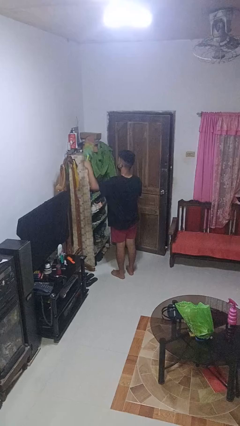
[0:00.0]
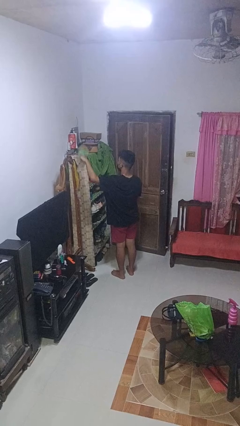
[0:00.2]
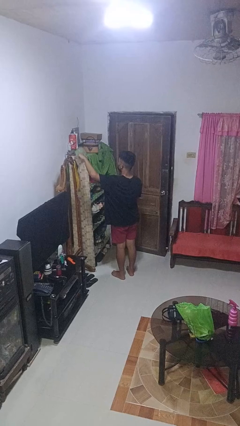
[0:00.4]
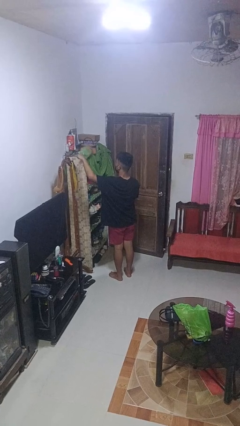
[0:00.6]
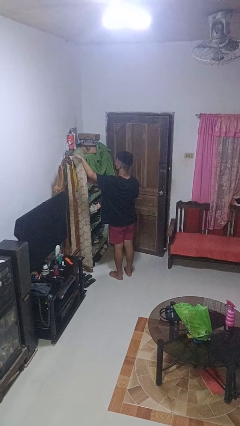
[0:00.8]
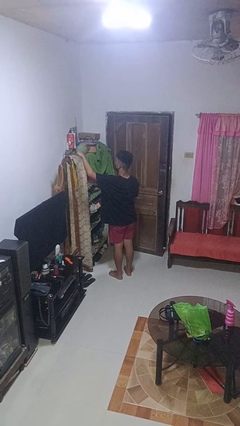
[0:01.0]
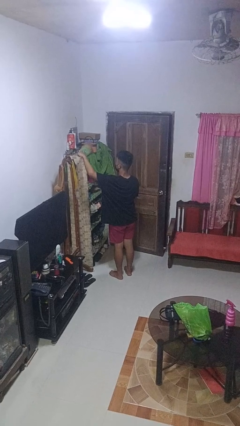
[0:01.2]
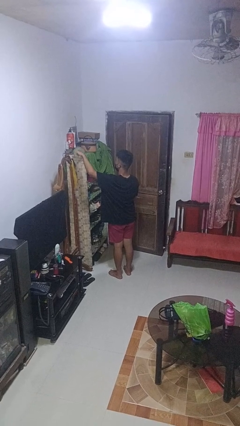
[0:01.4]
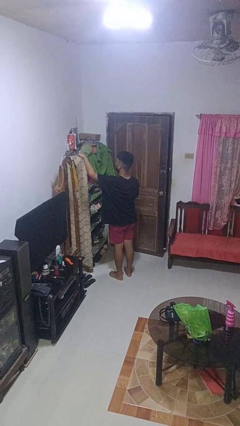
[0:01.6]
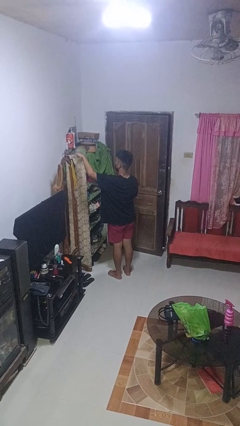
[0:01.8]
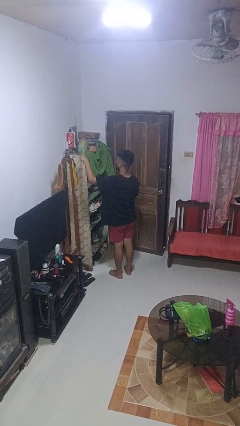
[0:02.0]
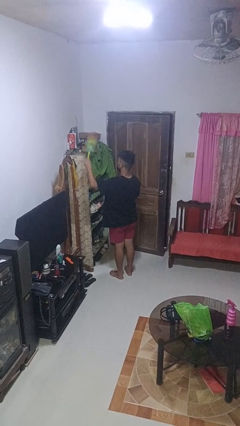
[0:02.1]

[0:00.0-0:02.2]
person dusts furniture

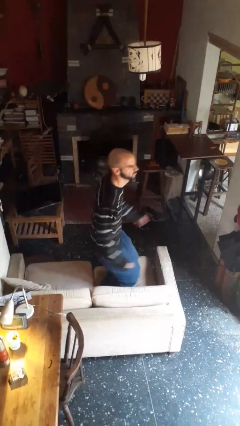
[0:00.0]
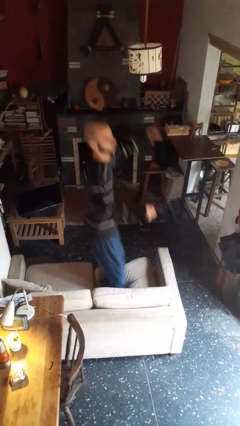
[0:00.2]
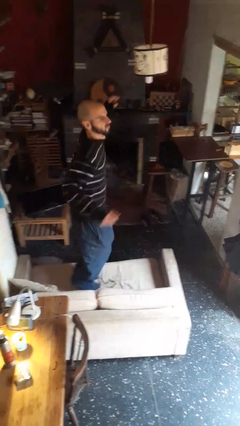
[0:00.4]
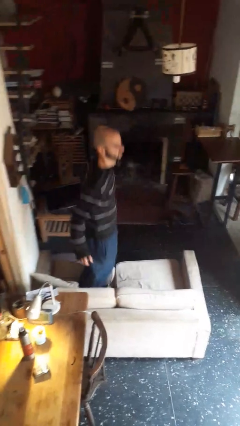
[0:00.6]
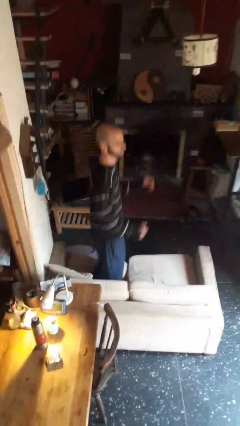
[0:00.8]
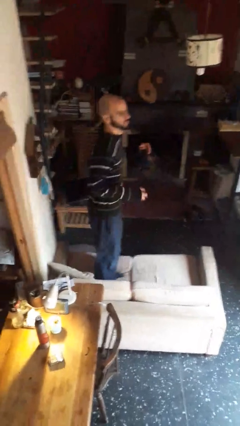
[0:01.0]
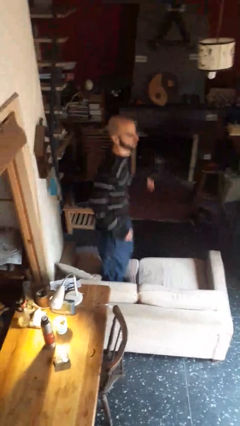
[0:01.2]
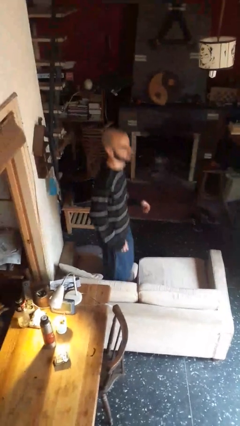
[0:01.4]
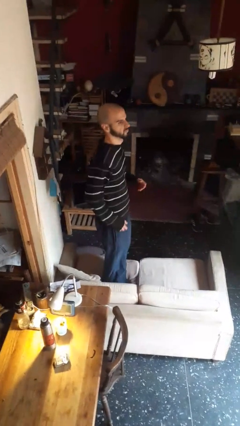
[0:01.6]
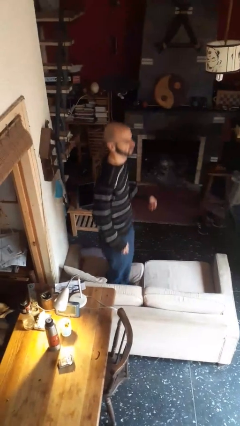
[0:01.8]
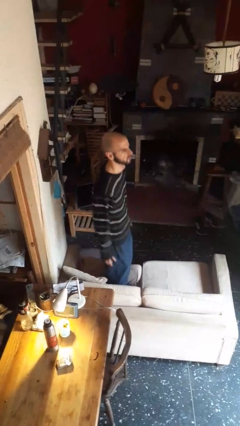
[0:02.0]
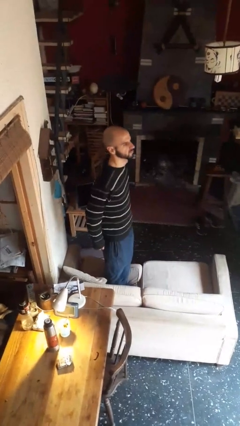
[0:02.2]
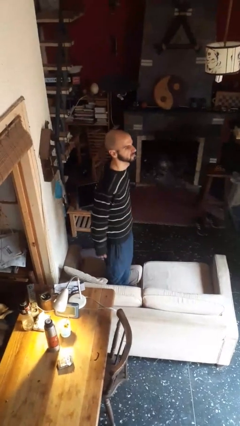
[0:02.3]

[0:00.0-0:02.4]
person jumps on couch

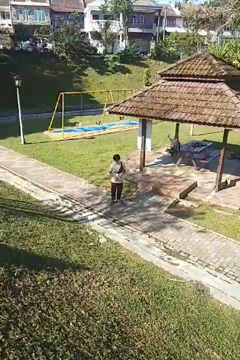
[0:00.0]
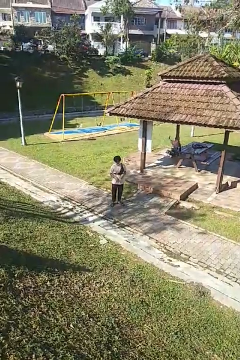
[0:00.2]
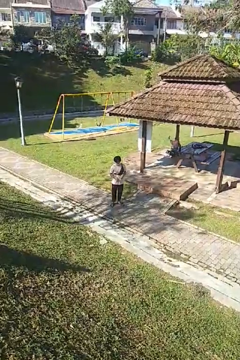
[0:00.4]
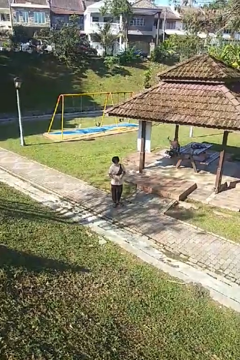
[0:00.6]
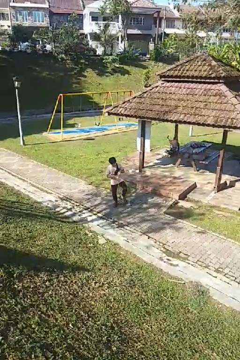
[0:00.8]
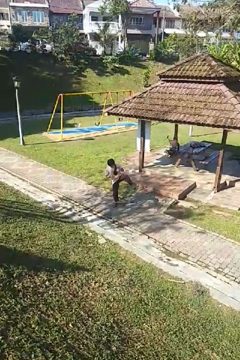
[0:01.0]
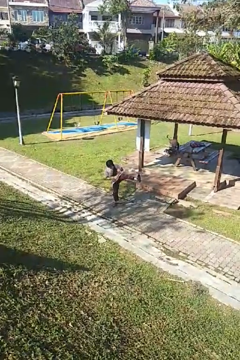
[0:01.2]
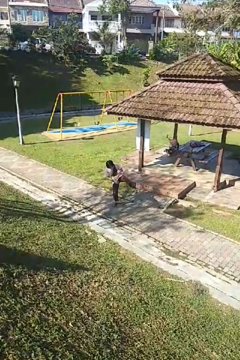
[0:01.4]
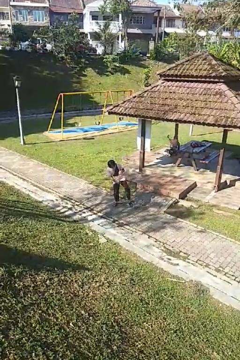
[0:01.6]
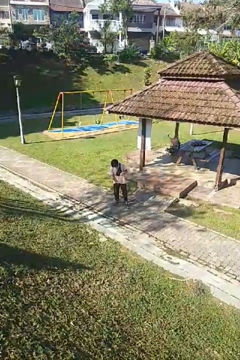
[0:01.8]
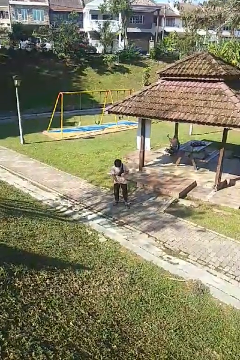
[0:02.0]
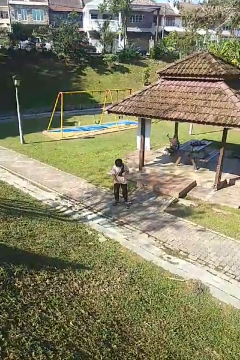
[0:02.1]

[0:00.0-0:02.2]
person karate kicks

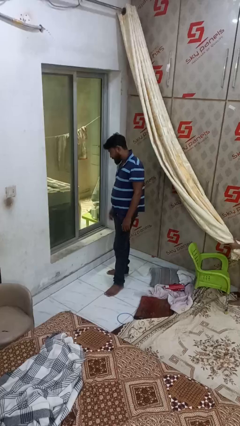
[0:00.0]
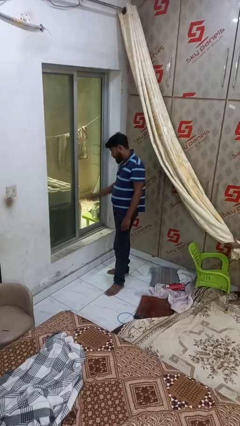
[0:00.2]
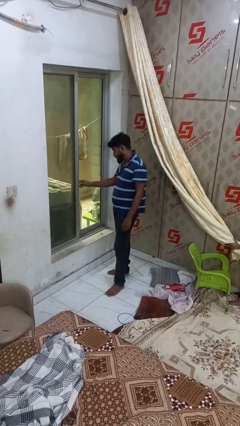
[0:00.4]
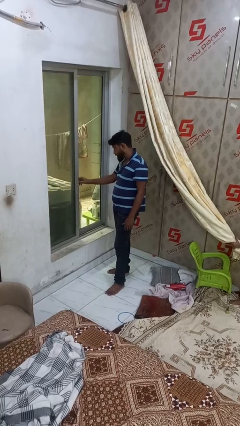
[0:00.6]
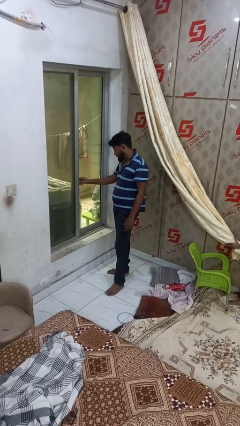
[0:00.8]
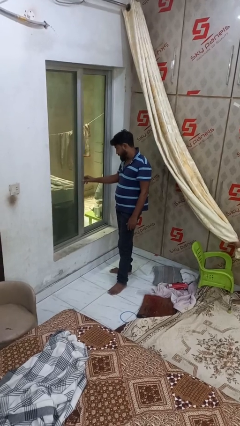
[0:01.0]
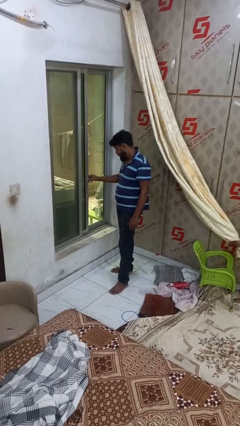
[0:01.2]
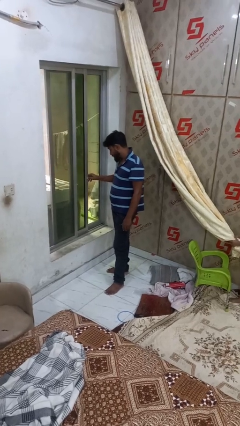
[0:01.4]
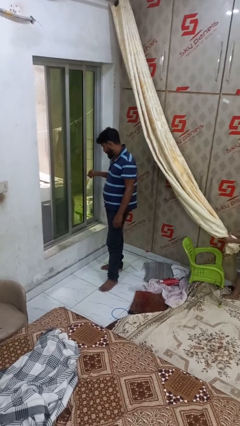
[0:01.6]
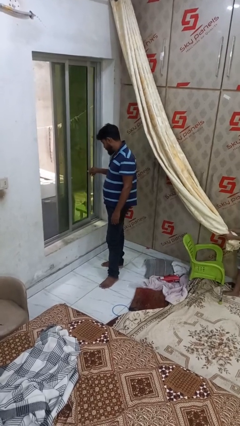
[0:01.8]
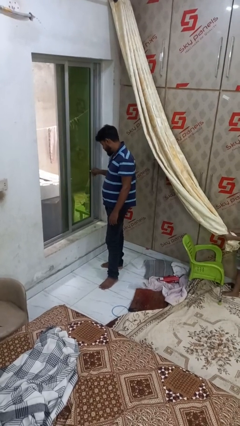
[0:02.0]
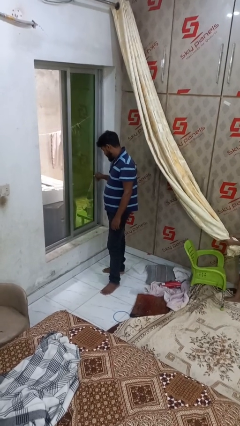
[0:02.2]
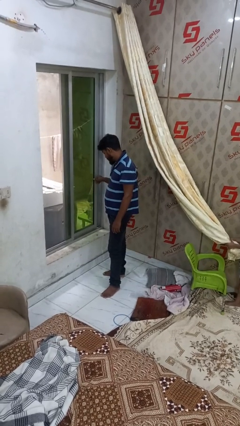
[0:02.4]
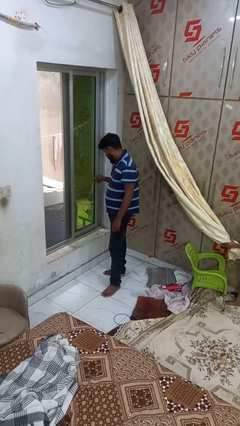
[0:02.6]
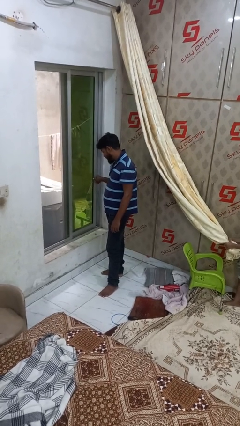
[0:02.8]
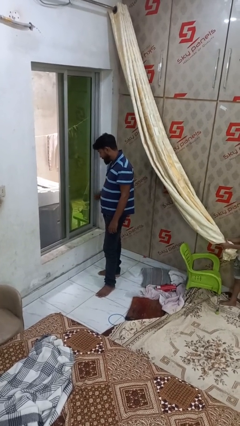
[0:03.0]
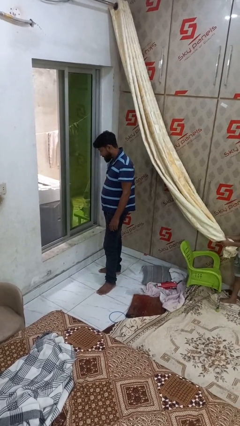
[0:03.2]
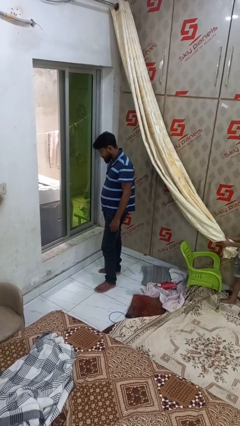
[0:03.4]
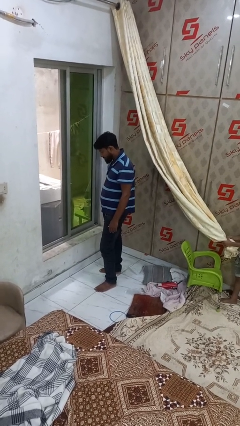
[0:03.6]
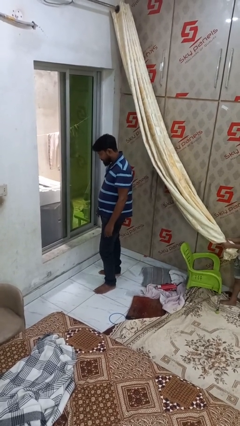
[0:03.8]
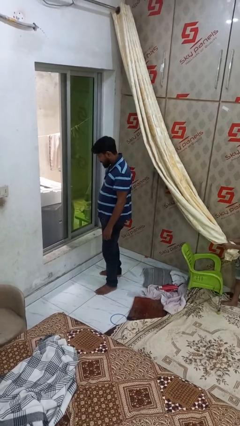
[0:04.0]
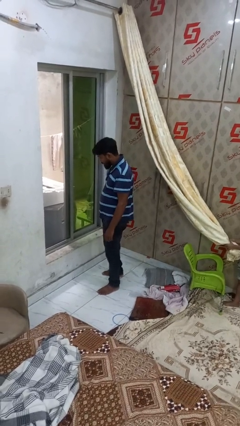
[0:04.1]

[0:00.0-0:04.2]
person opens sliding door

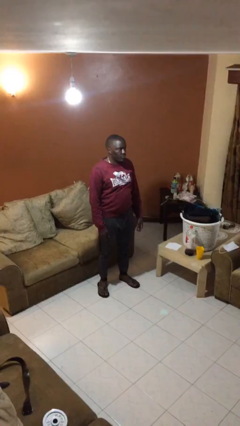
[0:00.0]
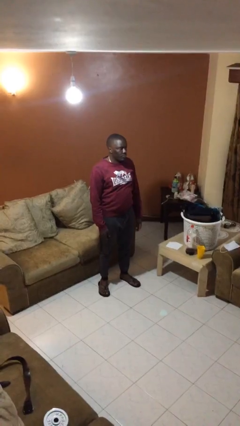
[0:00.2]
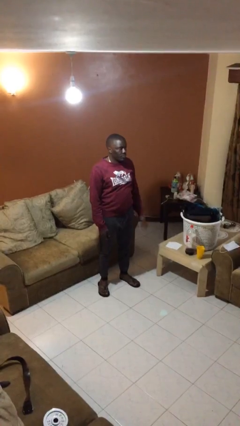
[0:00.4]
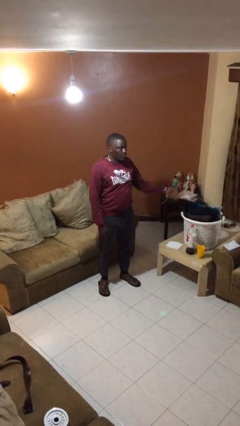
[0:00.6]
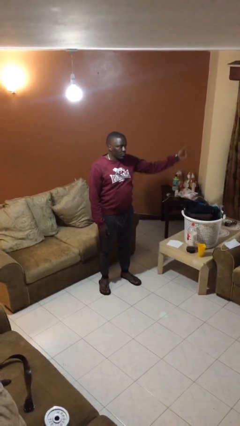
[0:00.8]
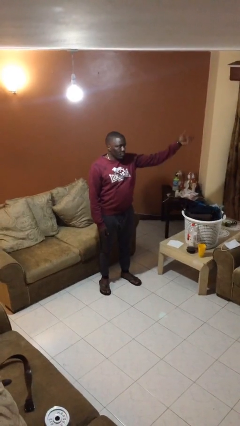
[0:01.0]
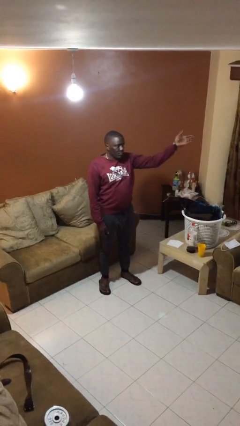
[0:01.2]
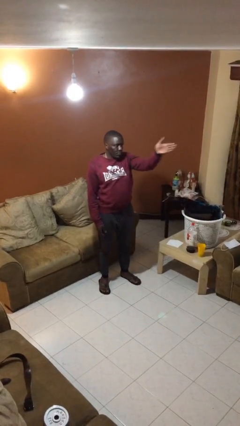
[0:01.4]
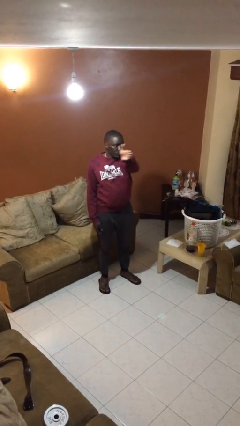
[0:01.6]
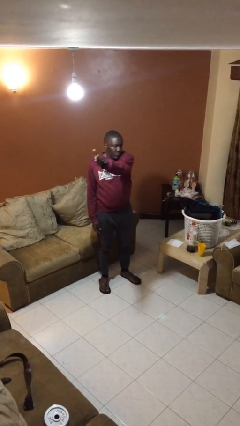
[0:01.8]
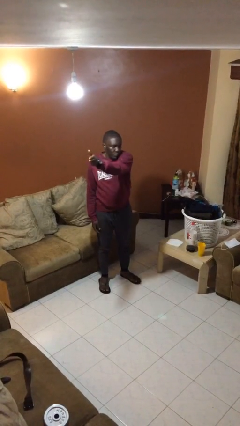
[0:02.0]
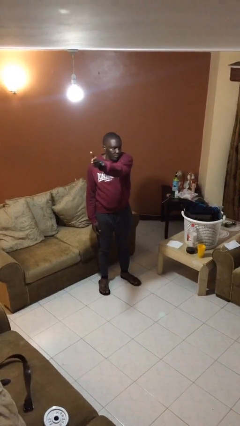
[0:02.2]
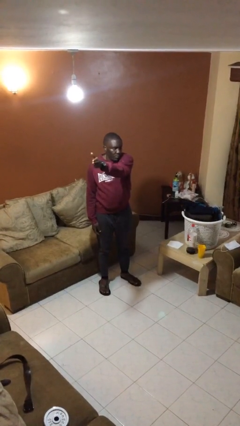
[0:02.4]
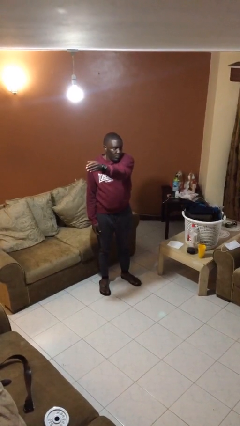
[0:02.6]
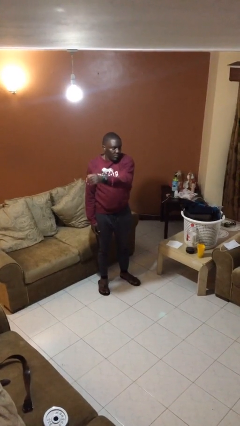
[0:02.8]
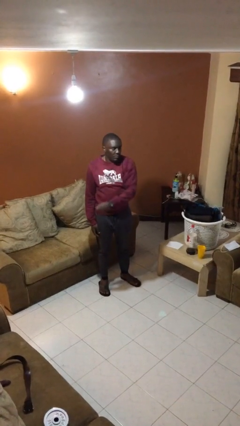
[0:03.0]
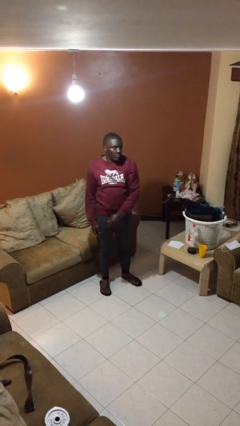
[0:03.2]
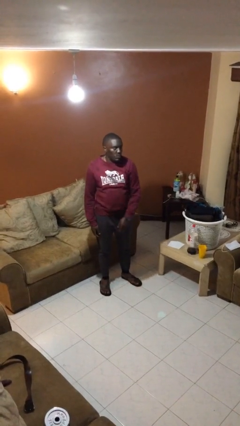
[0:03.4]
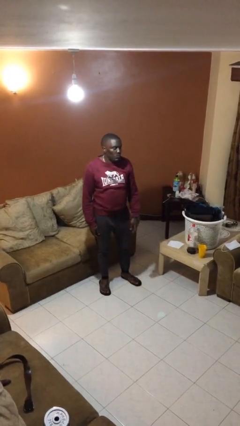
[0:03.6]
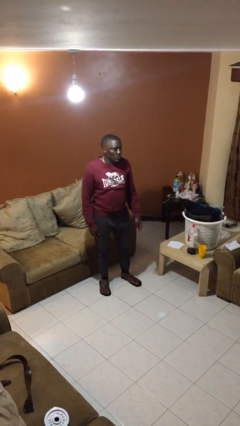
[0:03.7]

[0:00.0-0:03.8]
person gestures swipe right

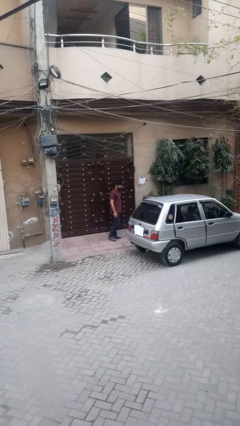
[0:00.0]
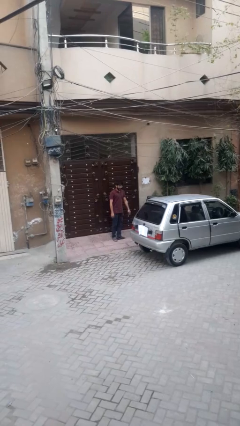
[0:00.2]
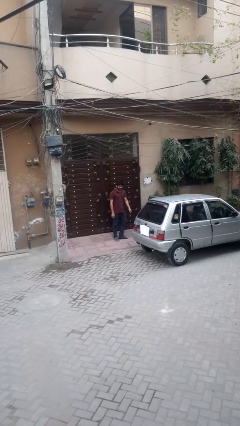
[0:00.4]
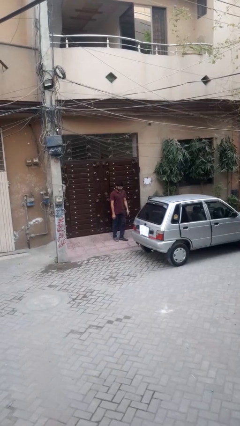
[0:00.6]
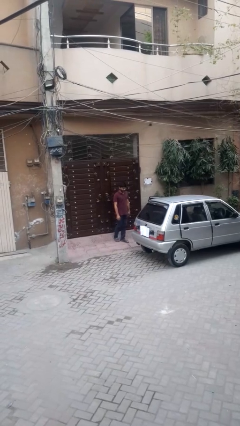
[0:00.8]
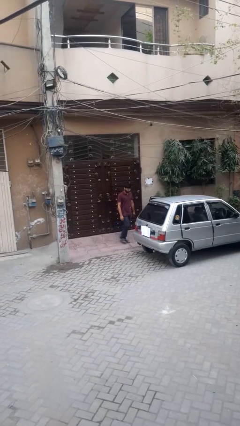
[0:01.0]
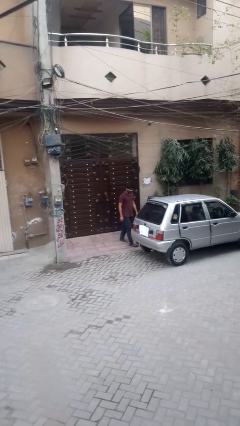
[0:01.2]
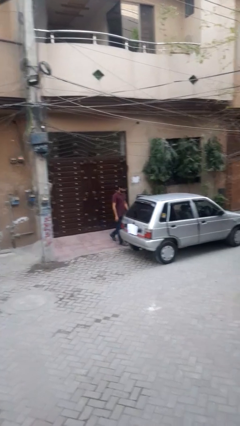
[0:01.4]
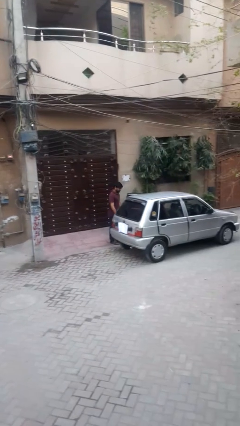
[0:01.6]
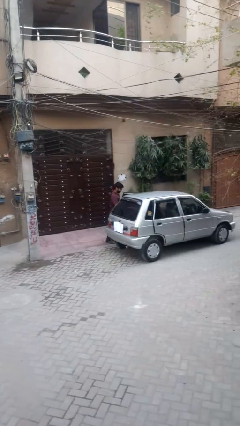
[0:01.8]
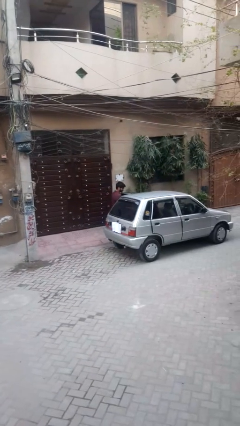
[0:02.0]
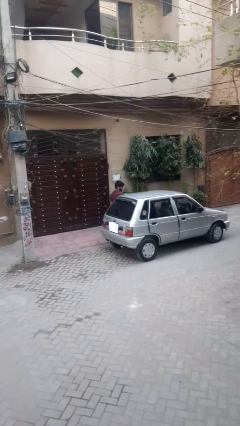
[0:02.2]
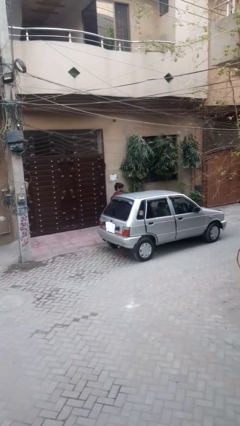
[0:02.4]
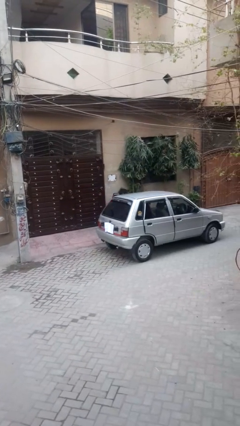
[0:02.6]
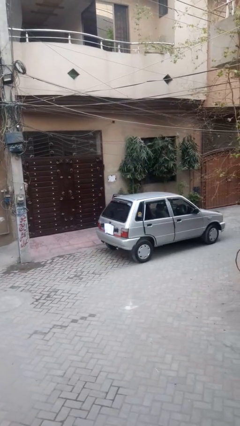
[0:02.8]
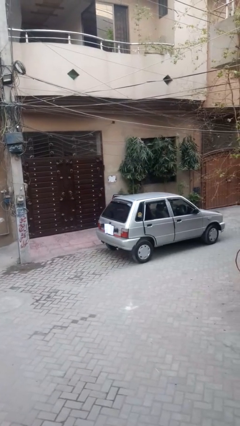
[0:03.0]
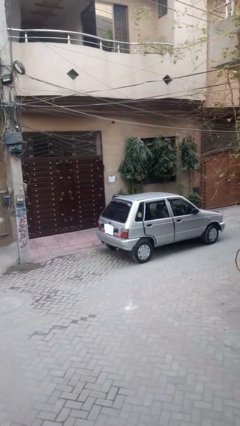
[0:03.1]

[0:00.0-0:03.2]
person enters car
